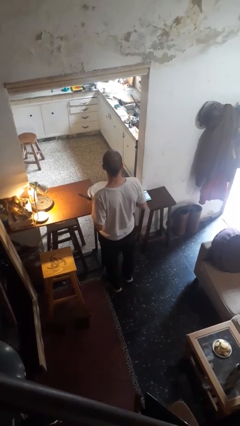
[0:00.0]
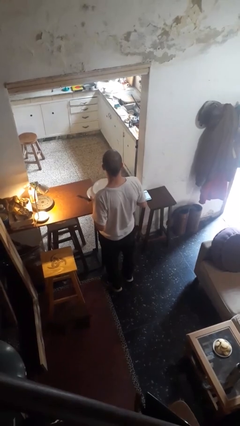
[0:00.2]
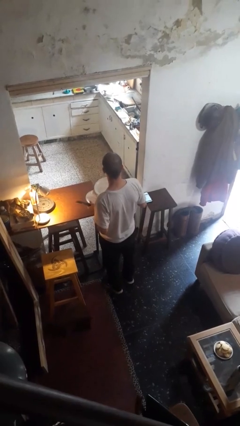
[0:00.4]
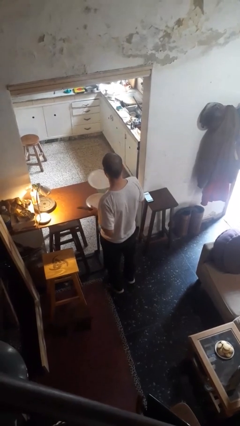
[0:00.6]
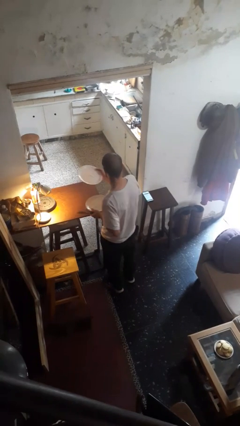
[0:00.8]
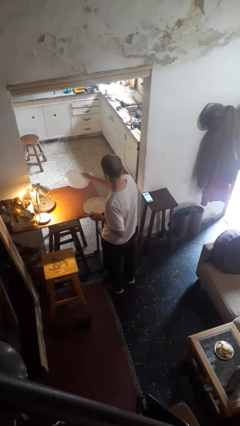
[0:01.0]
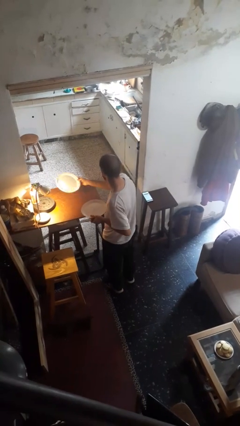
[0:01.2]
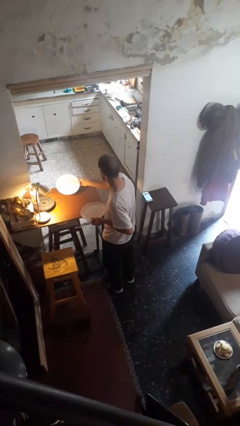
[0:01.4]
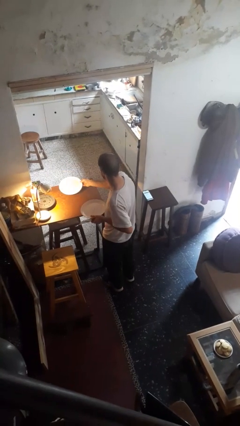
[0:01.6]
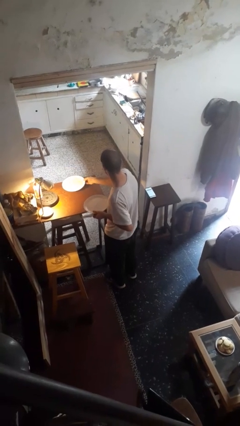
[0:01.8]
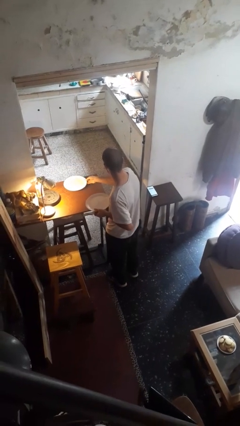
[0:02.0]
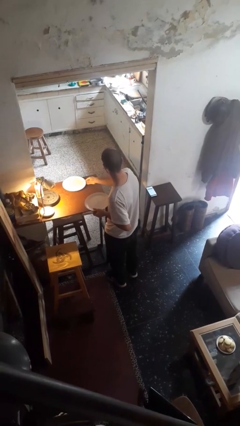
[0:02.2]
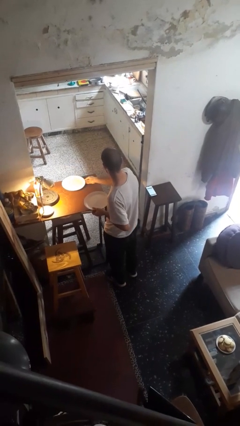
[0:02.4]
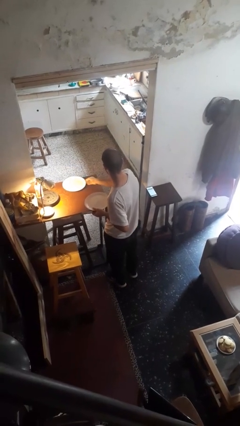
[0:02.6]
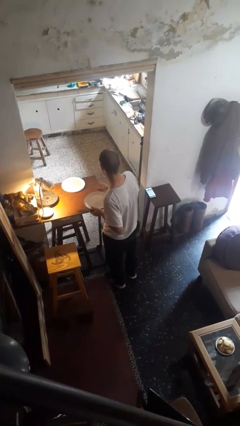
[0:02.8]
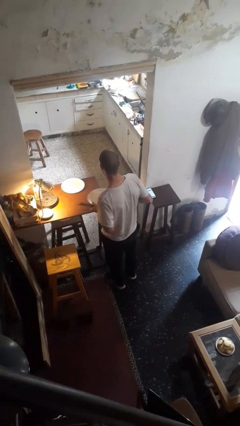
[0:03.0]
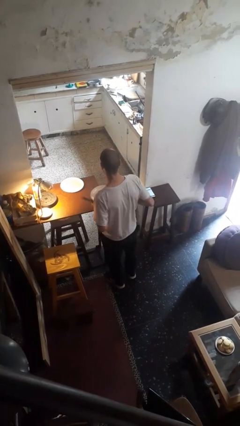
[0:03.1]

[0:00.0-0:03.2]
person sets table

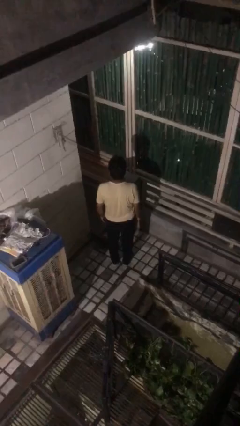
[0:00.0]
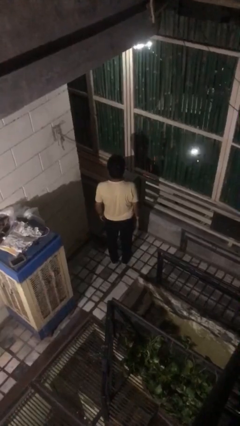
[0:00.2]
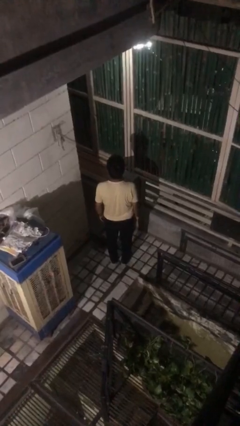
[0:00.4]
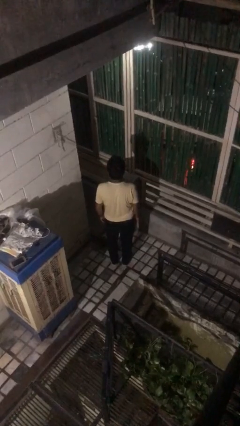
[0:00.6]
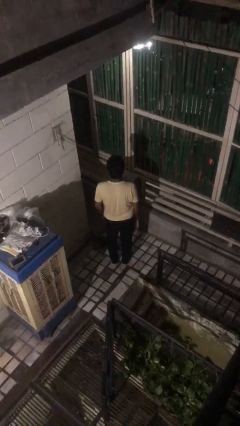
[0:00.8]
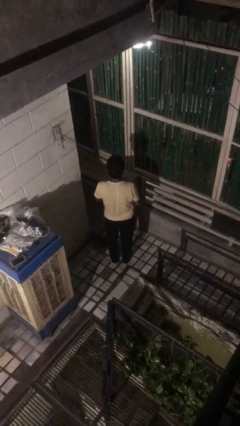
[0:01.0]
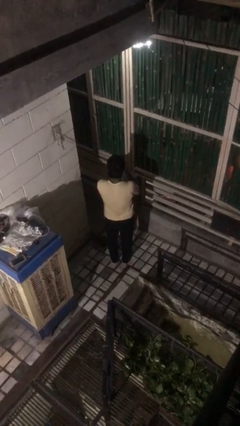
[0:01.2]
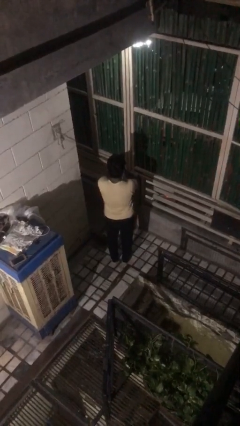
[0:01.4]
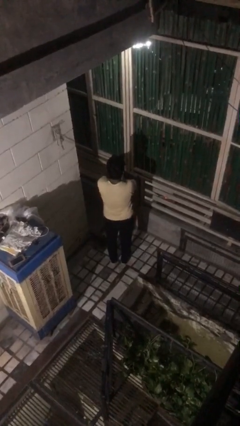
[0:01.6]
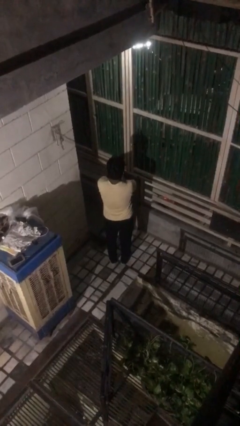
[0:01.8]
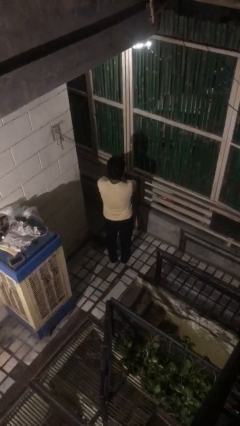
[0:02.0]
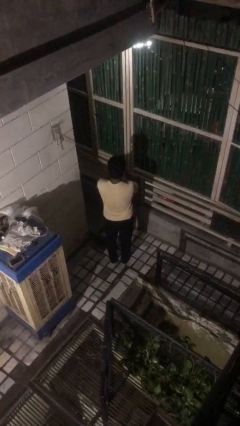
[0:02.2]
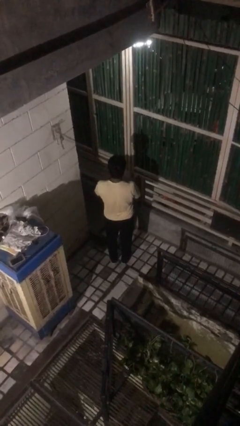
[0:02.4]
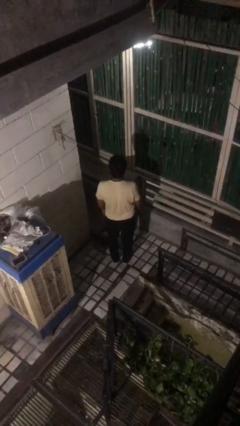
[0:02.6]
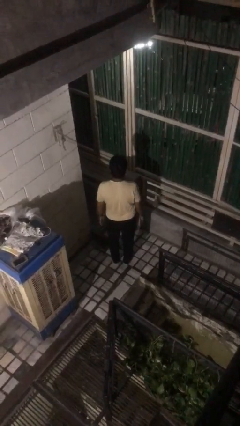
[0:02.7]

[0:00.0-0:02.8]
person covers face with hands

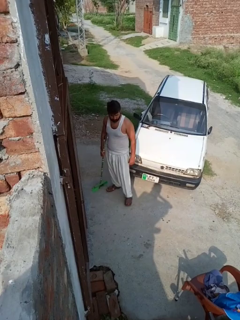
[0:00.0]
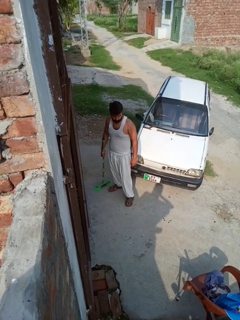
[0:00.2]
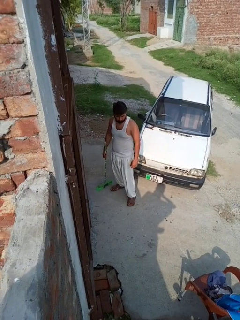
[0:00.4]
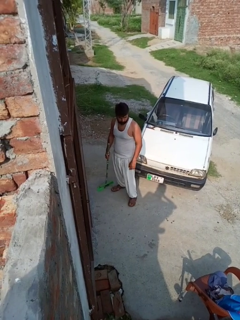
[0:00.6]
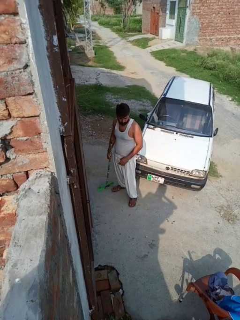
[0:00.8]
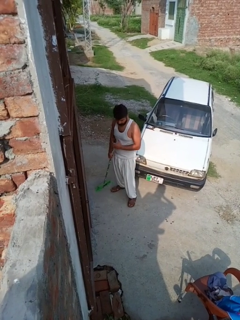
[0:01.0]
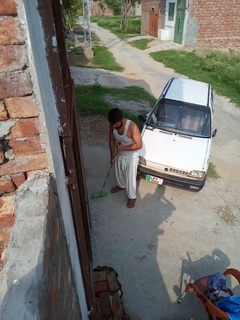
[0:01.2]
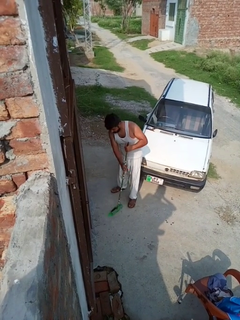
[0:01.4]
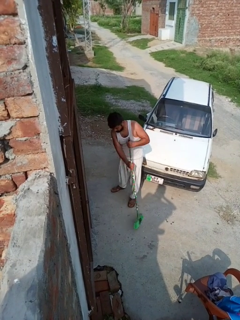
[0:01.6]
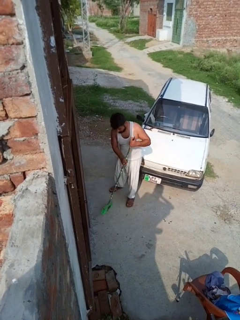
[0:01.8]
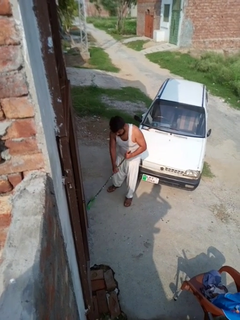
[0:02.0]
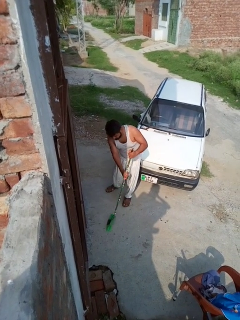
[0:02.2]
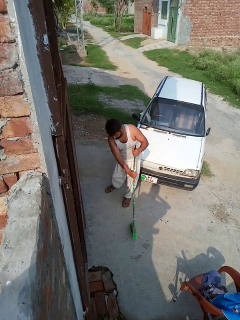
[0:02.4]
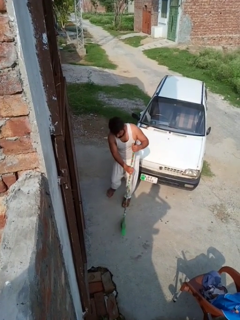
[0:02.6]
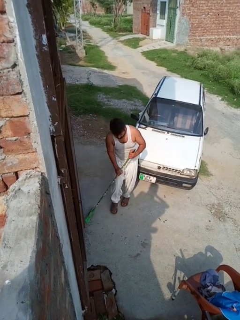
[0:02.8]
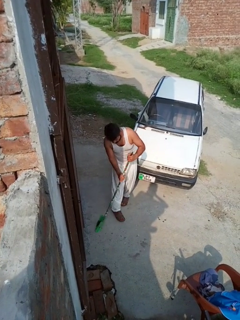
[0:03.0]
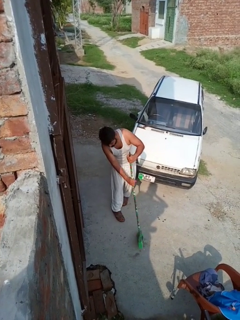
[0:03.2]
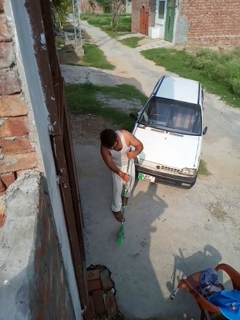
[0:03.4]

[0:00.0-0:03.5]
person sweeps floor

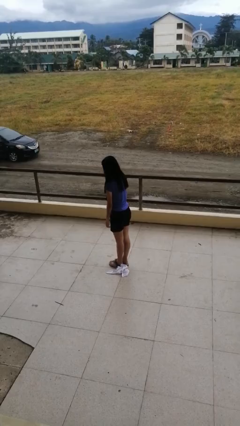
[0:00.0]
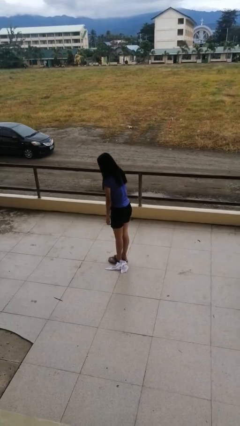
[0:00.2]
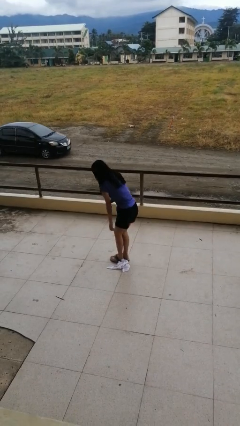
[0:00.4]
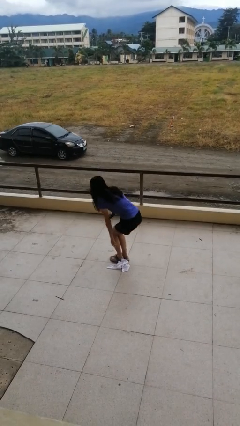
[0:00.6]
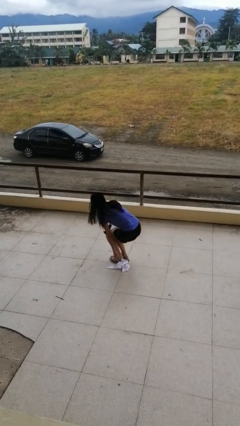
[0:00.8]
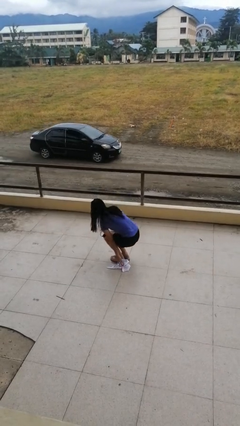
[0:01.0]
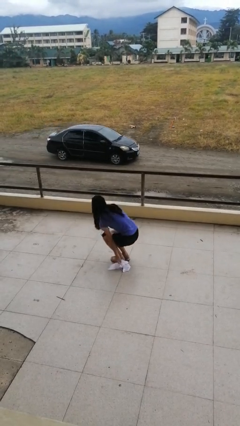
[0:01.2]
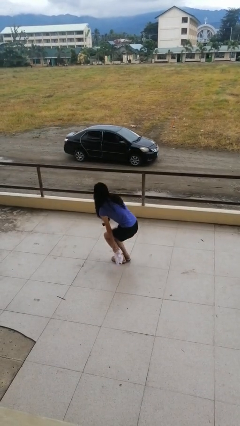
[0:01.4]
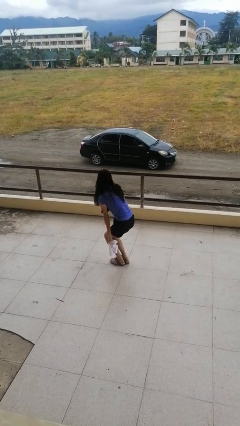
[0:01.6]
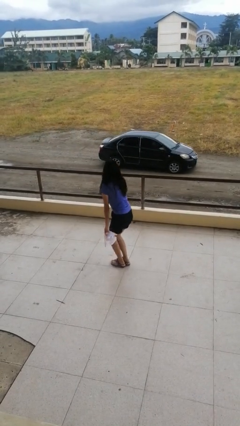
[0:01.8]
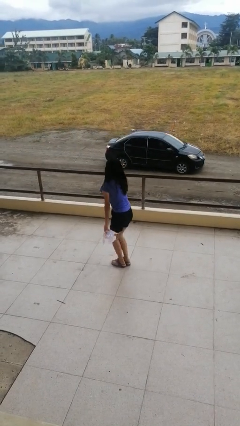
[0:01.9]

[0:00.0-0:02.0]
person picks up object from floor

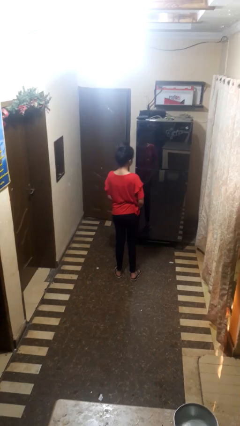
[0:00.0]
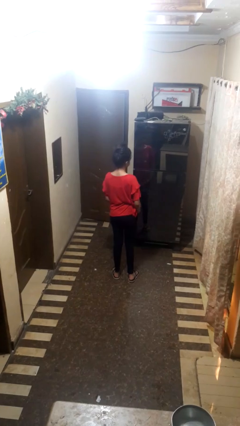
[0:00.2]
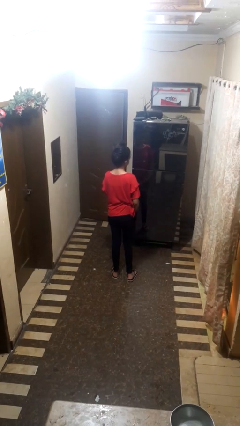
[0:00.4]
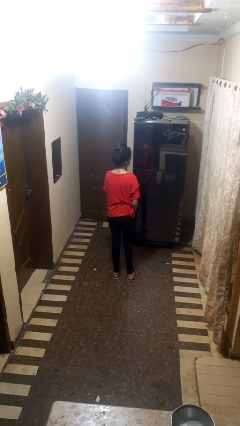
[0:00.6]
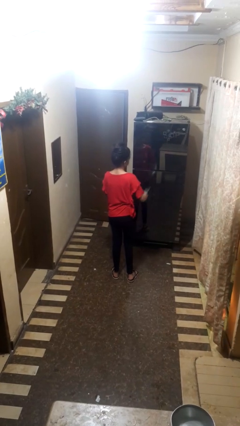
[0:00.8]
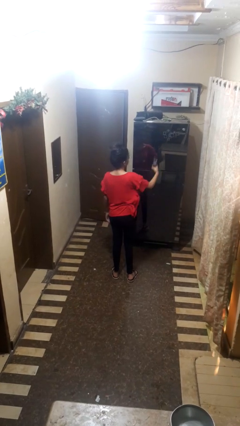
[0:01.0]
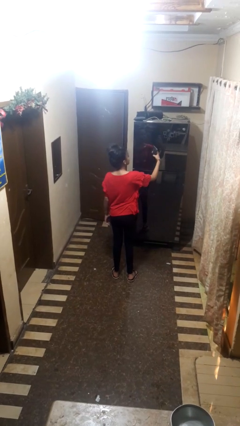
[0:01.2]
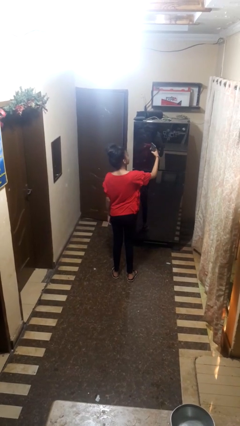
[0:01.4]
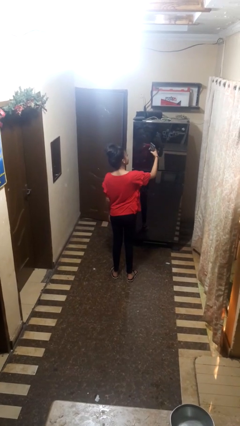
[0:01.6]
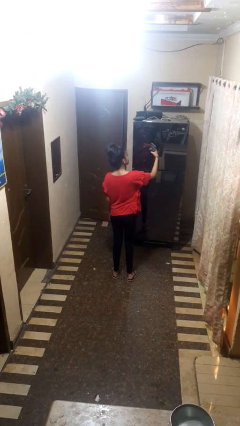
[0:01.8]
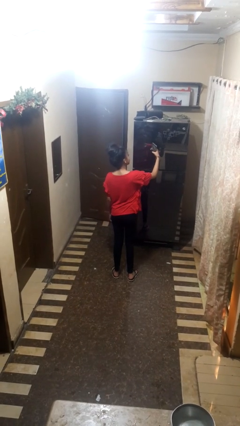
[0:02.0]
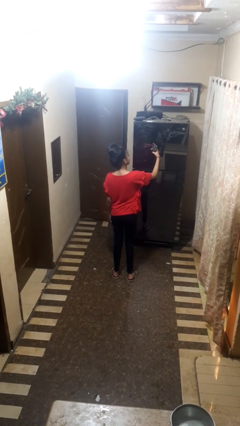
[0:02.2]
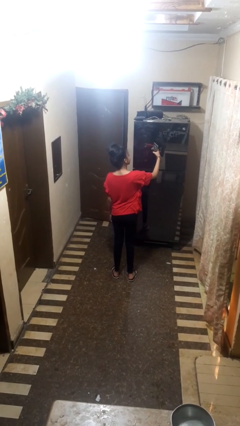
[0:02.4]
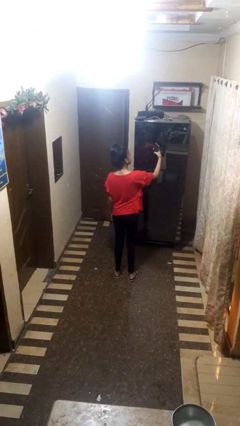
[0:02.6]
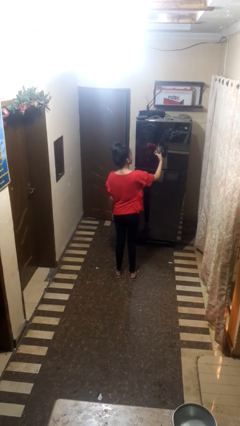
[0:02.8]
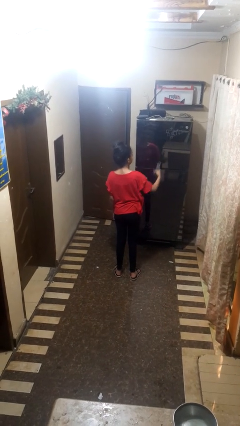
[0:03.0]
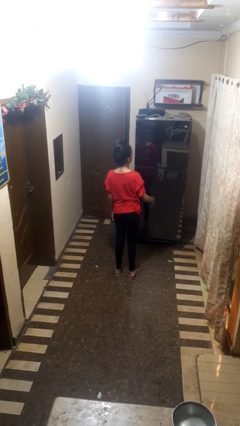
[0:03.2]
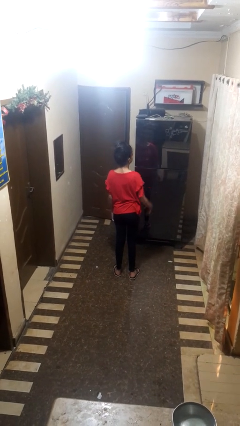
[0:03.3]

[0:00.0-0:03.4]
person takes selfie

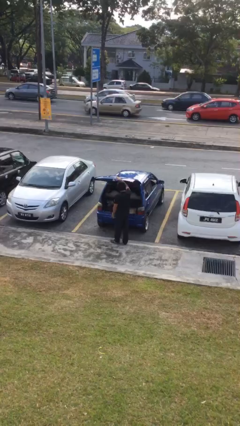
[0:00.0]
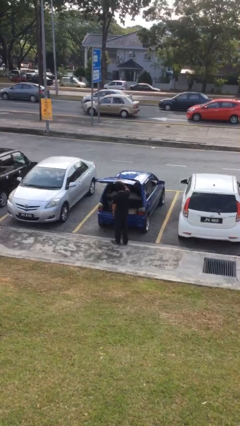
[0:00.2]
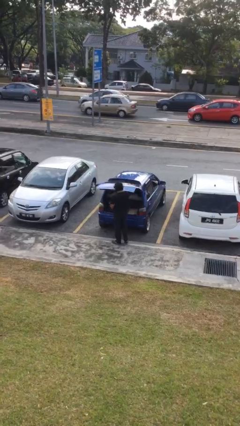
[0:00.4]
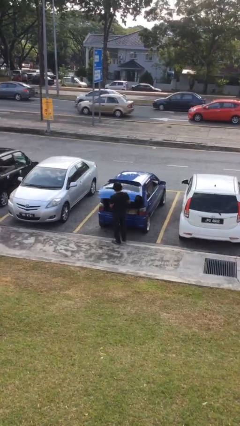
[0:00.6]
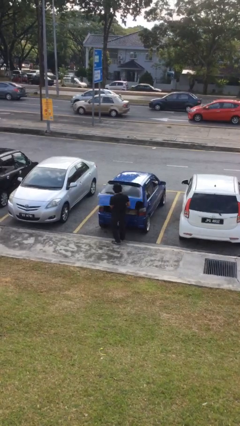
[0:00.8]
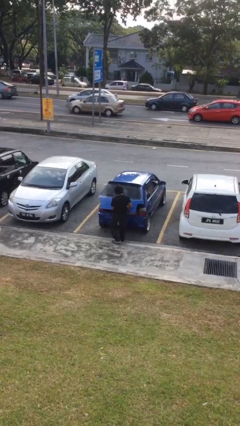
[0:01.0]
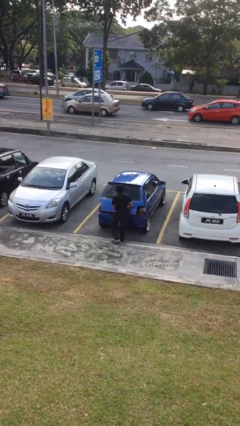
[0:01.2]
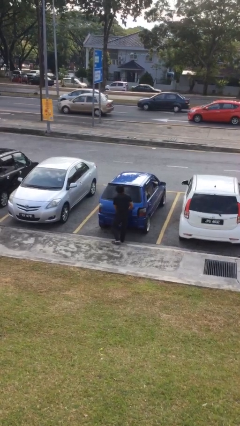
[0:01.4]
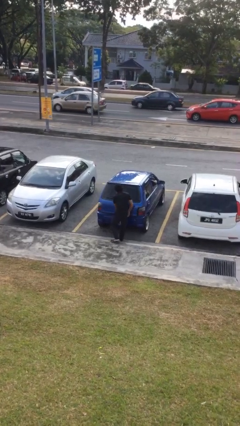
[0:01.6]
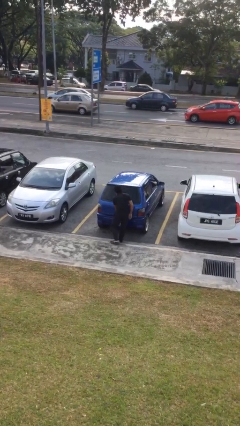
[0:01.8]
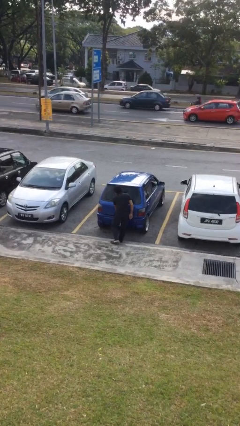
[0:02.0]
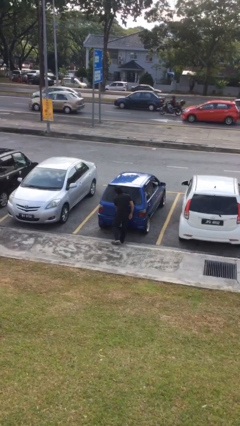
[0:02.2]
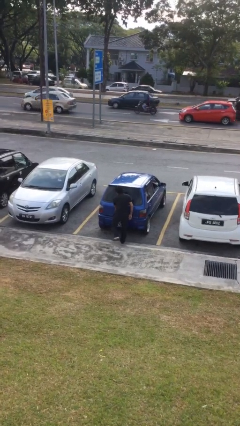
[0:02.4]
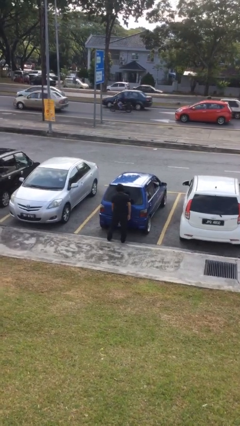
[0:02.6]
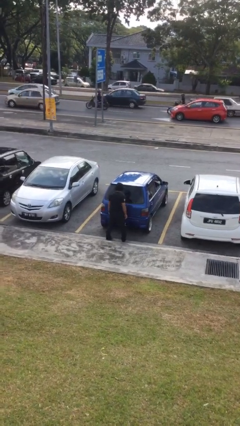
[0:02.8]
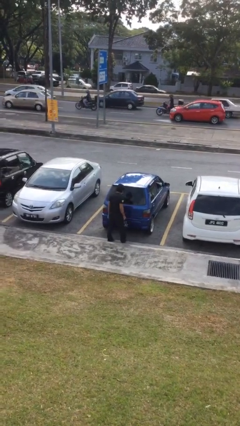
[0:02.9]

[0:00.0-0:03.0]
person closes car trunk

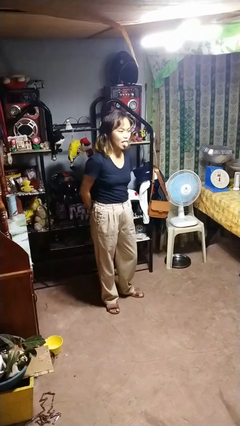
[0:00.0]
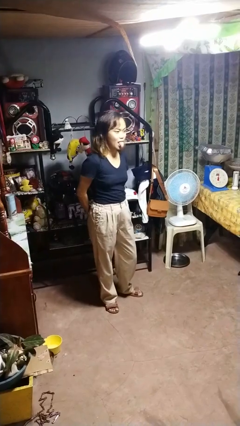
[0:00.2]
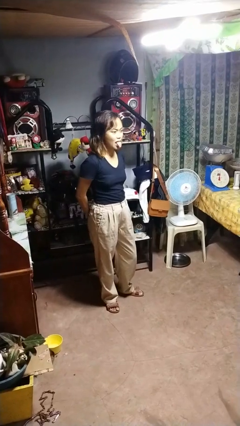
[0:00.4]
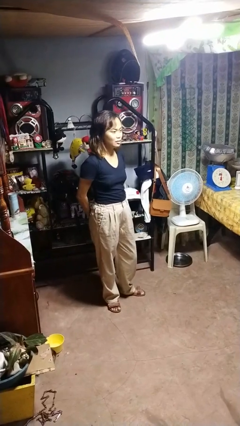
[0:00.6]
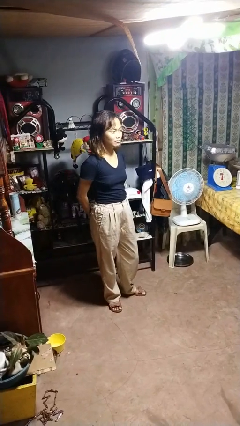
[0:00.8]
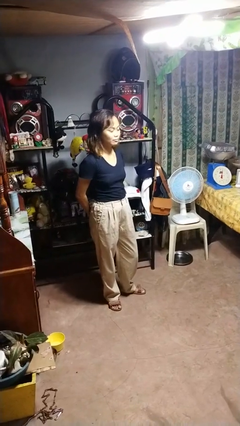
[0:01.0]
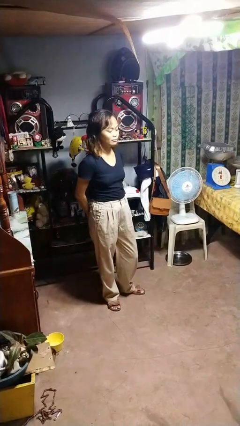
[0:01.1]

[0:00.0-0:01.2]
person sticks out tongue
